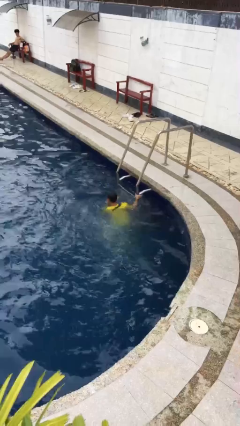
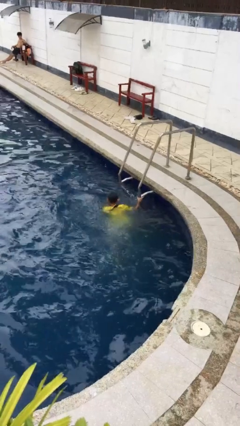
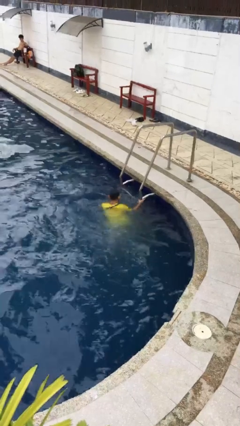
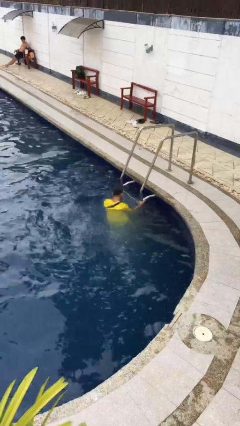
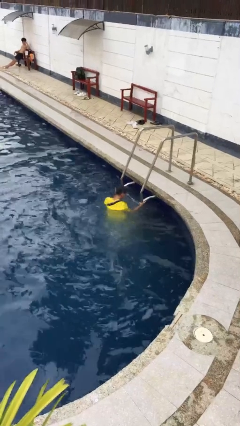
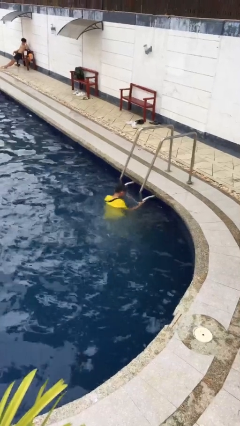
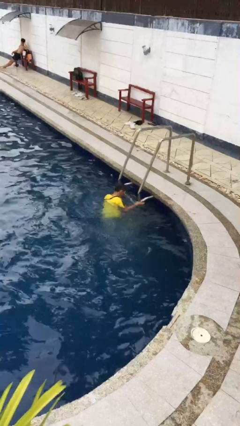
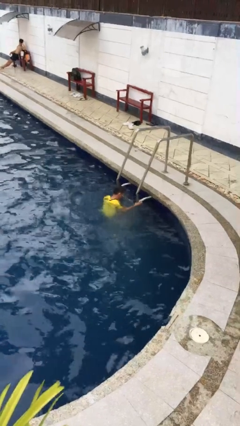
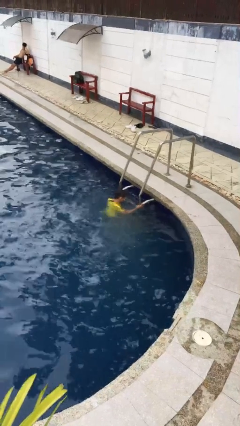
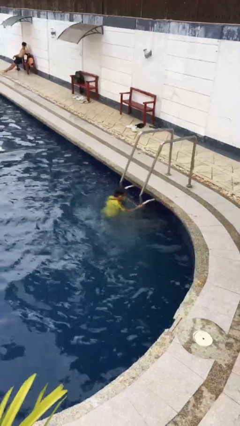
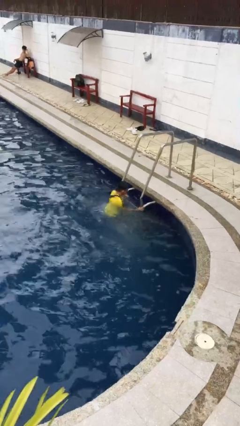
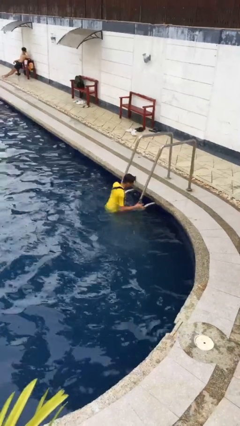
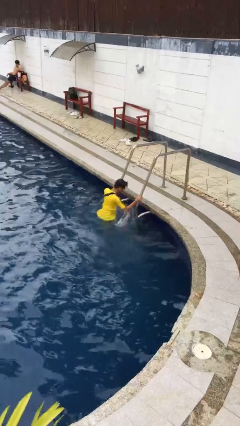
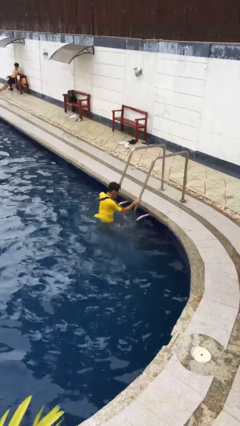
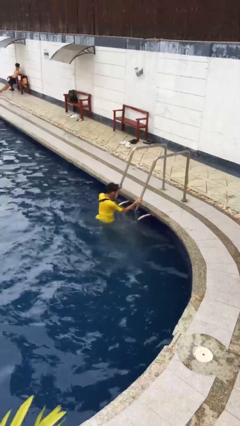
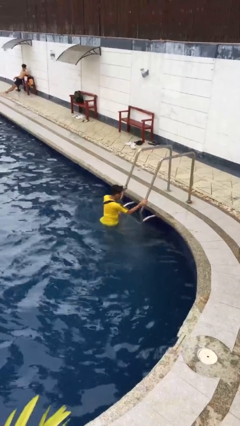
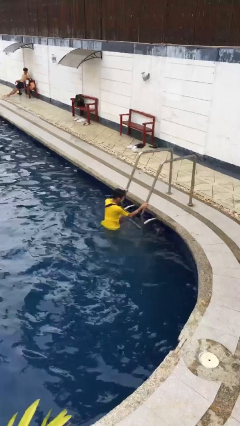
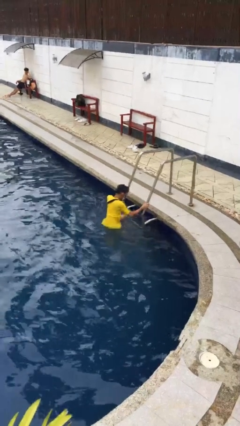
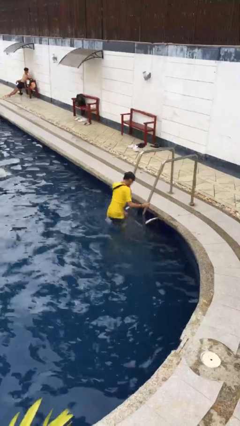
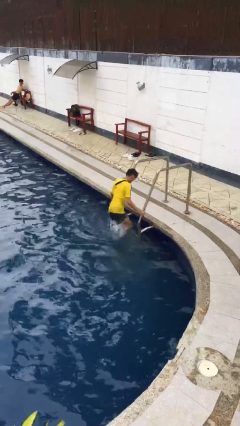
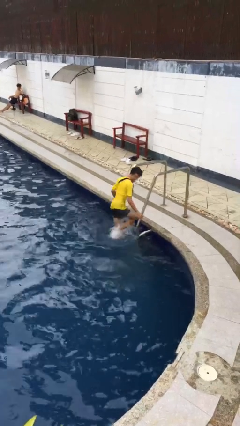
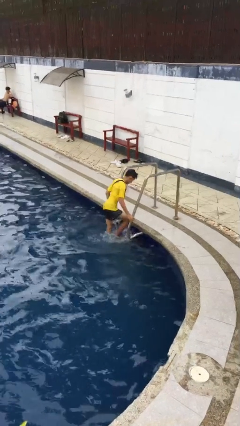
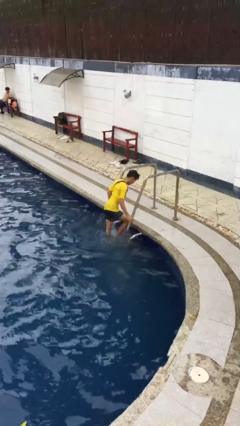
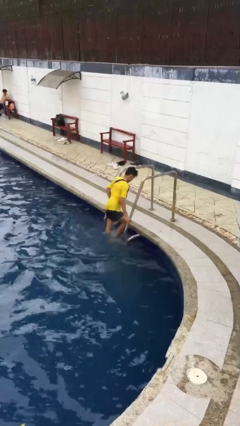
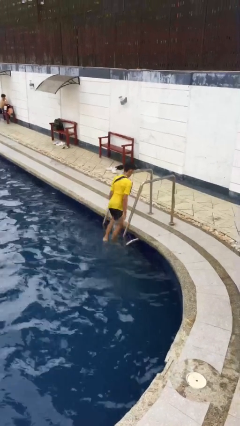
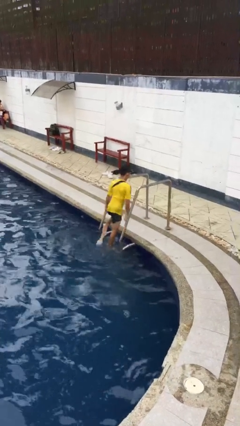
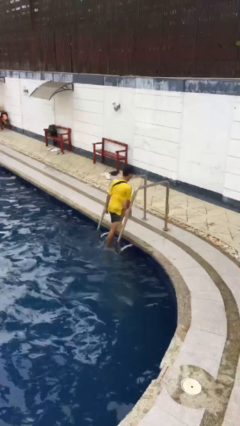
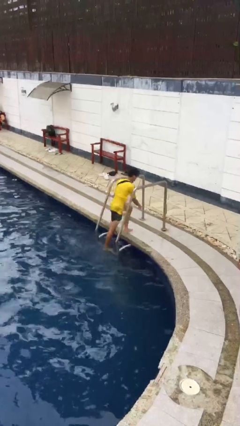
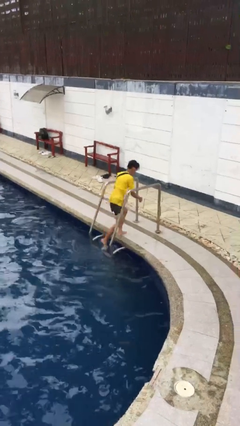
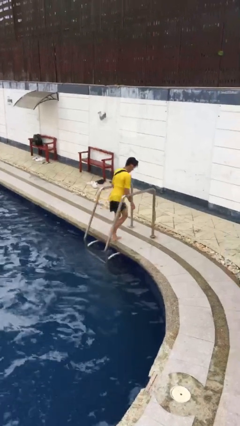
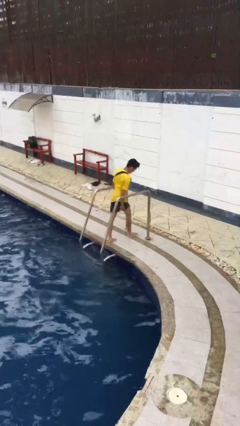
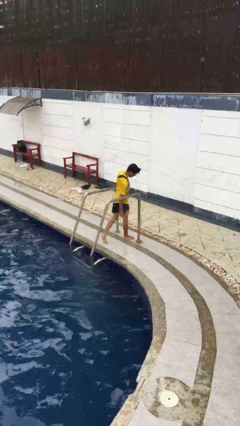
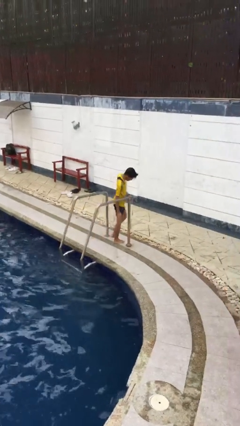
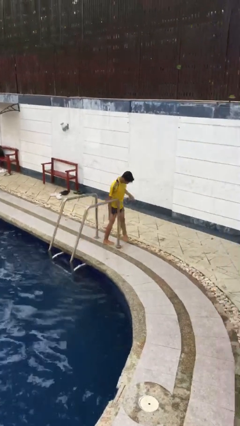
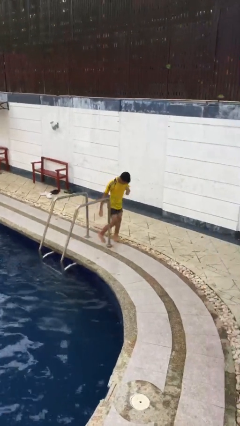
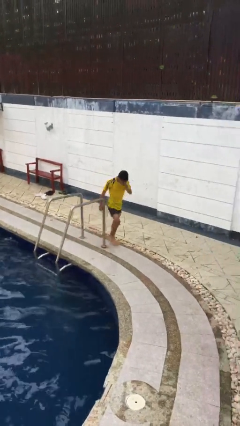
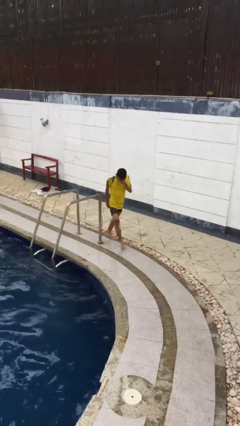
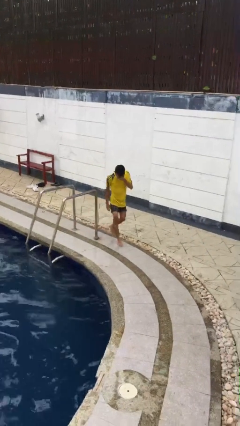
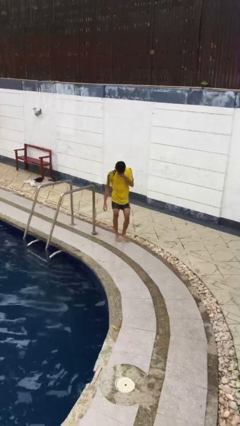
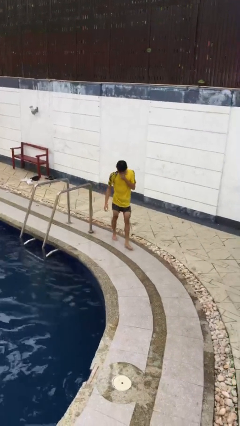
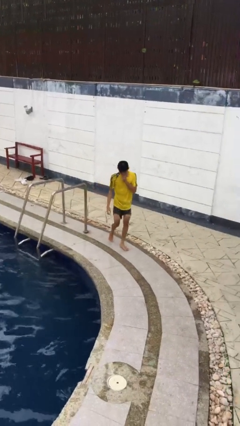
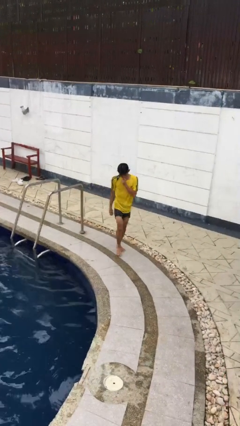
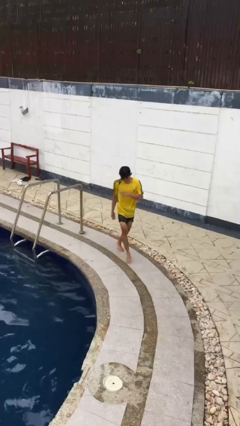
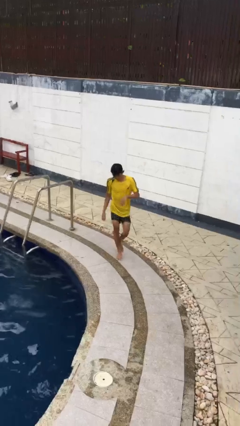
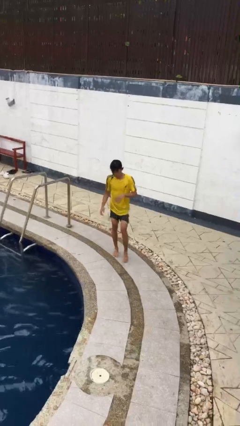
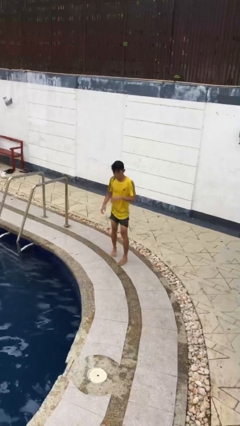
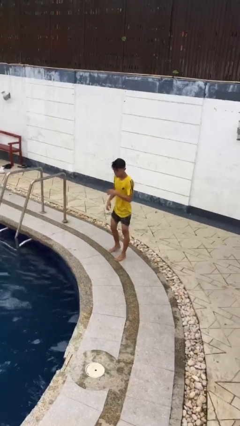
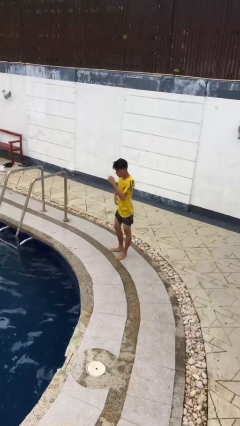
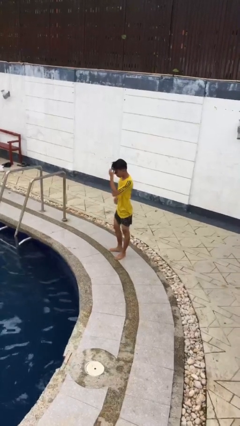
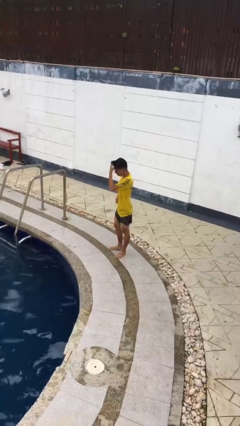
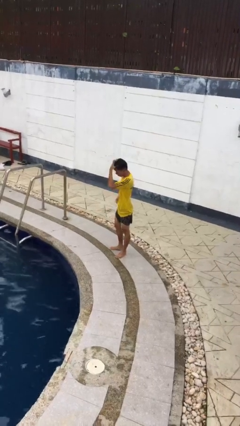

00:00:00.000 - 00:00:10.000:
person exits pool

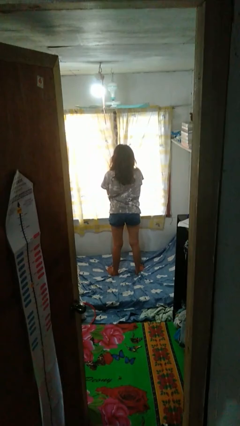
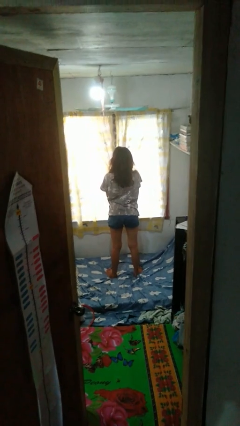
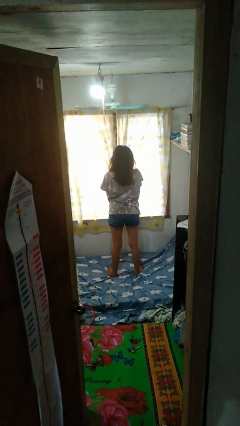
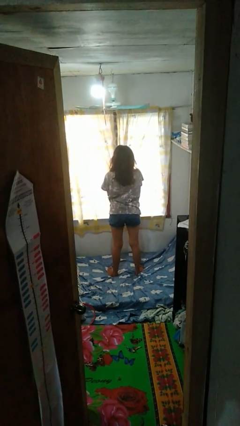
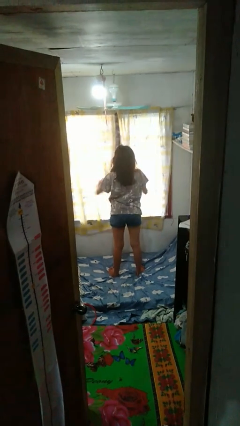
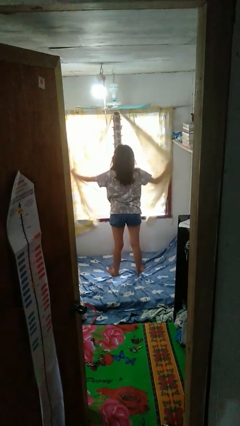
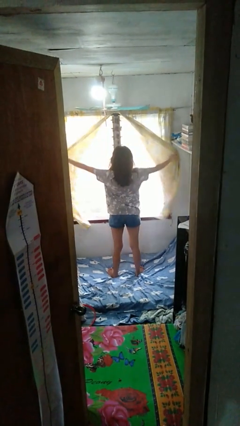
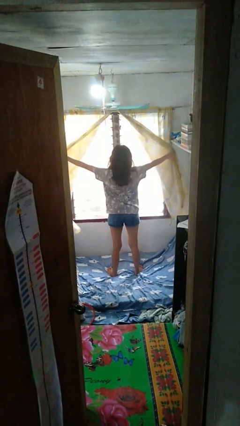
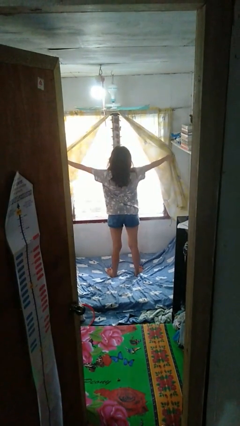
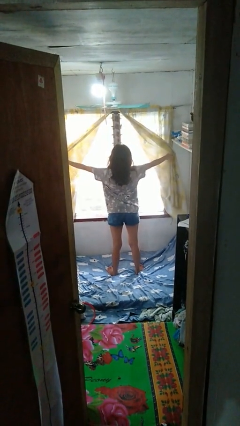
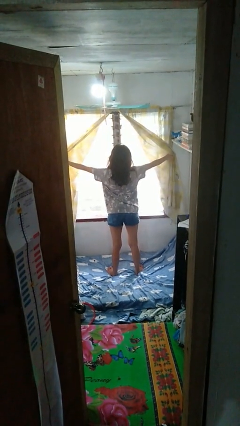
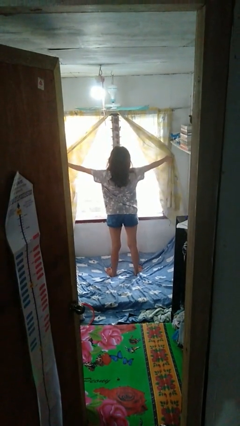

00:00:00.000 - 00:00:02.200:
person opens curtains

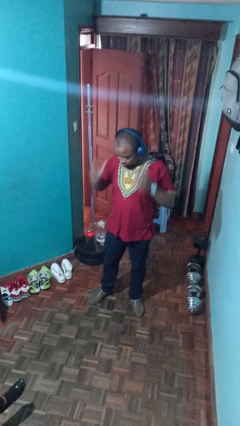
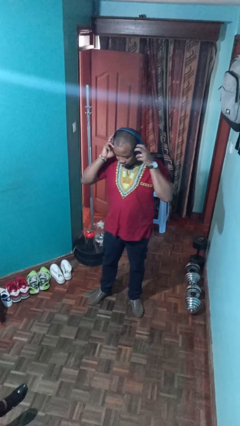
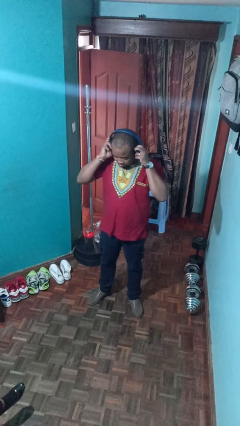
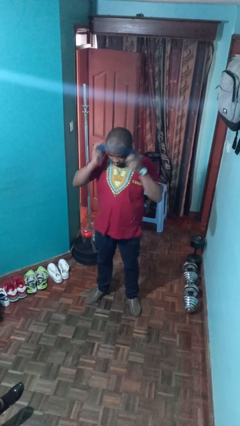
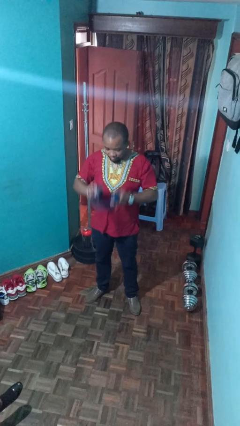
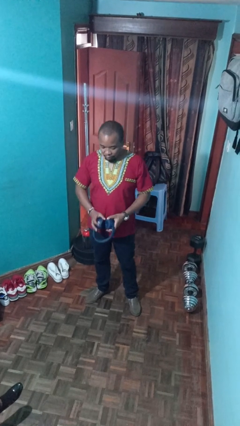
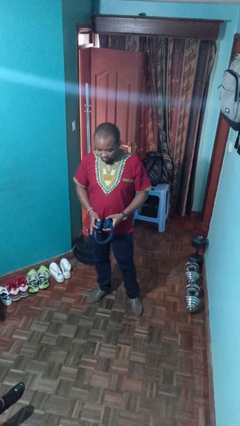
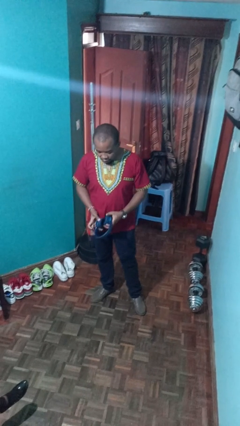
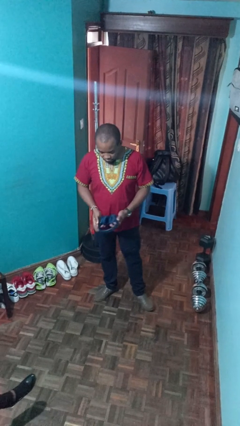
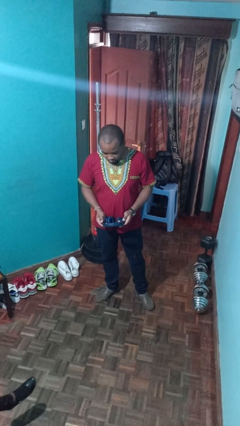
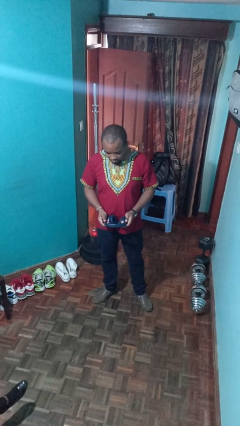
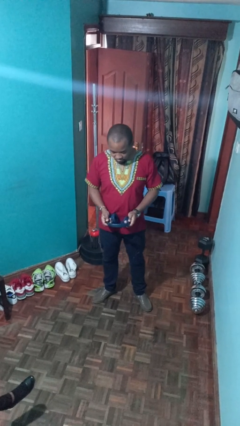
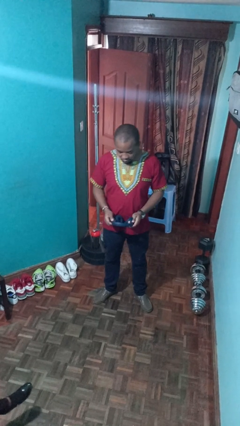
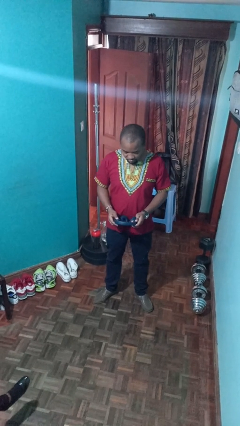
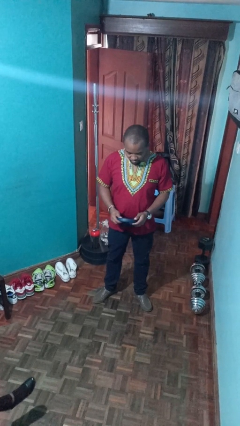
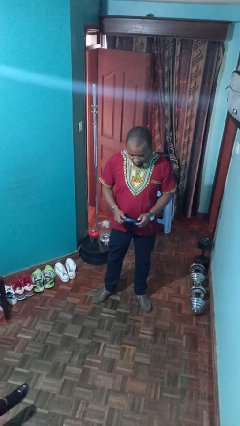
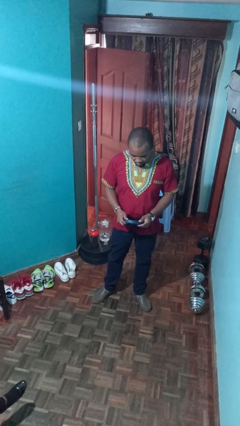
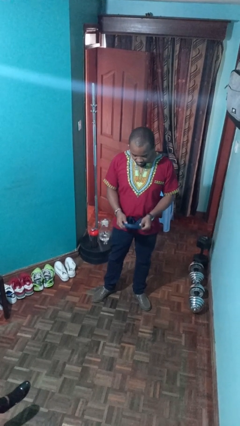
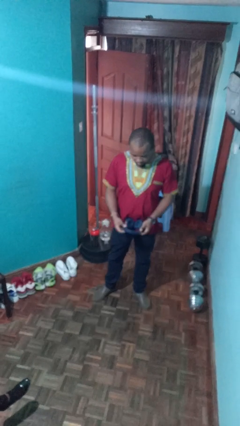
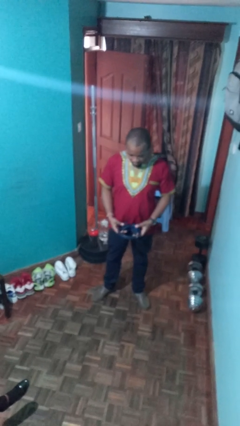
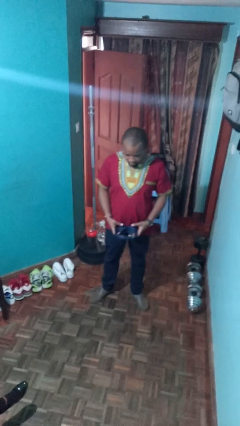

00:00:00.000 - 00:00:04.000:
person takes off headphones

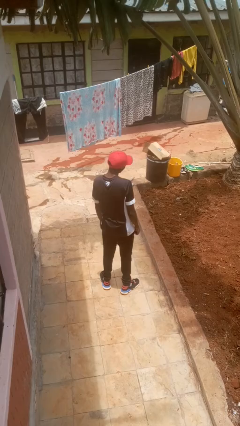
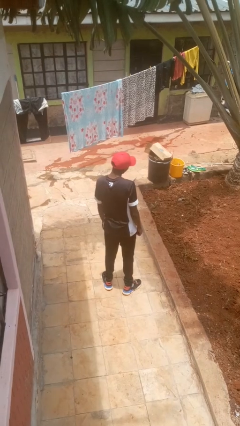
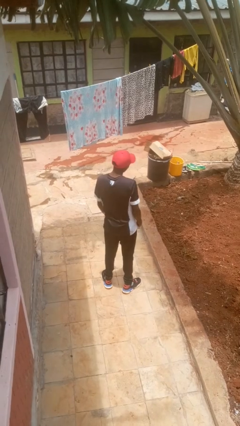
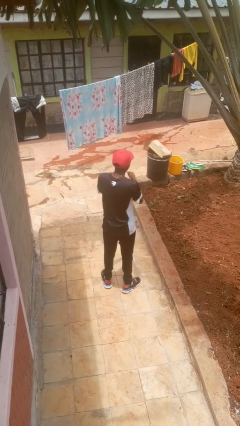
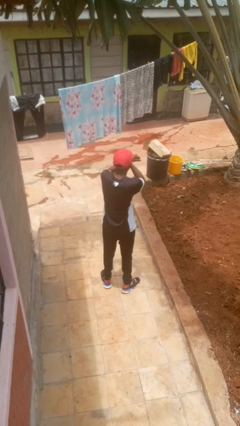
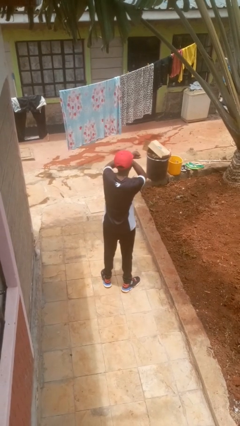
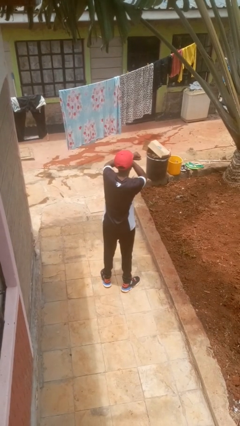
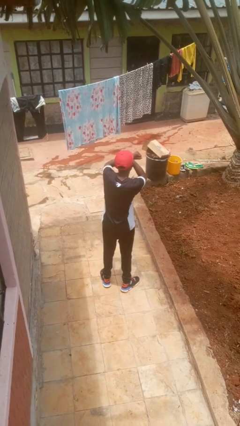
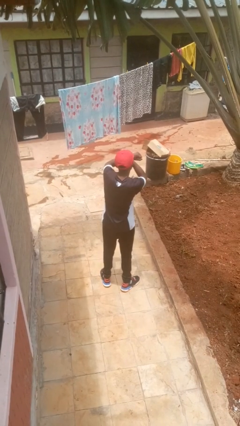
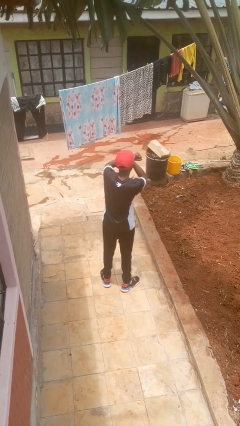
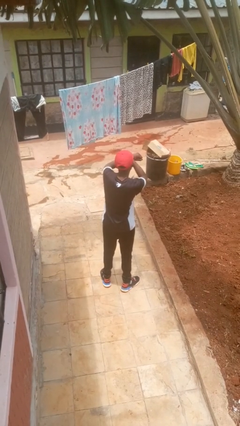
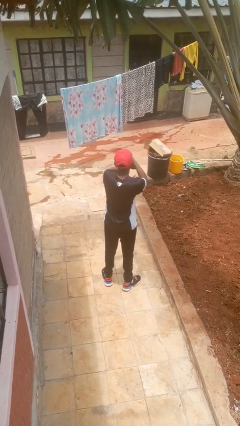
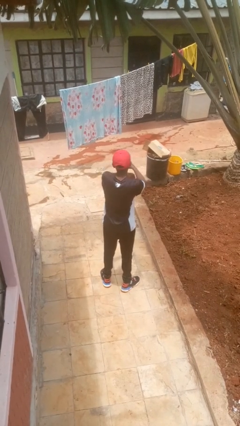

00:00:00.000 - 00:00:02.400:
person gestures arms x
